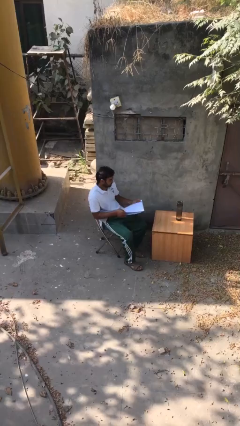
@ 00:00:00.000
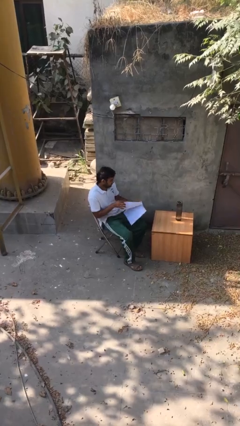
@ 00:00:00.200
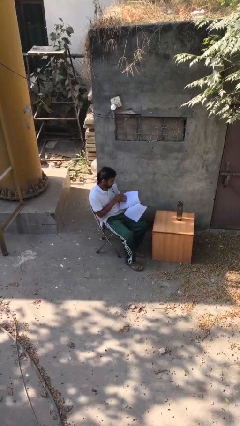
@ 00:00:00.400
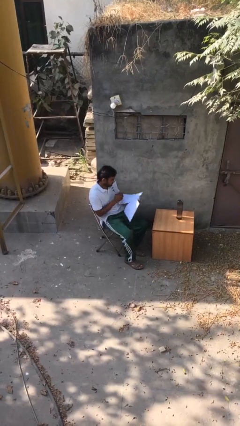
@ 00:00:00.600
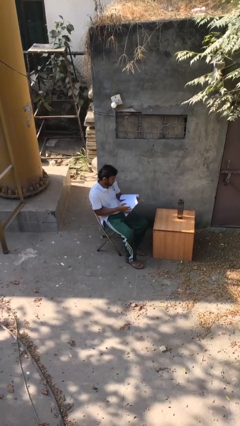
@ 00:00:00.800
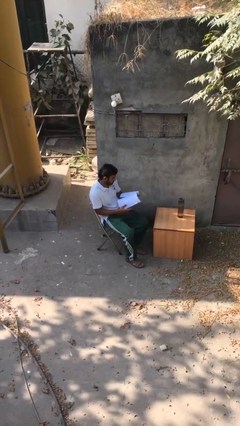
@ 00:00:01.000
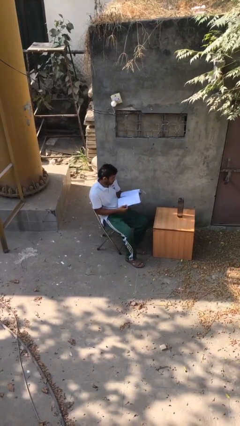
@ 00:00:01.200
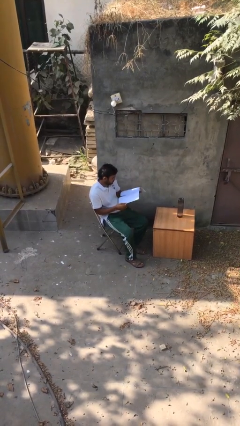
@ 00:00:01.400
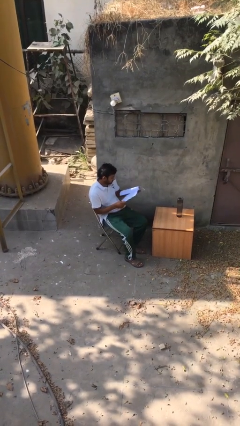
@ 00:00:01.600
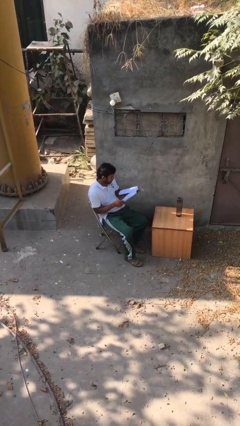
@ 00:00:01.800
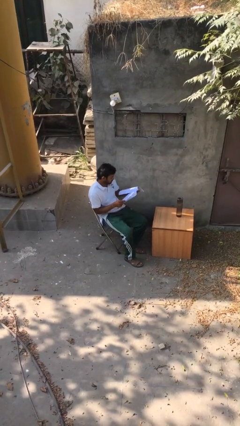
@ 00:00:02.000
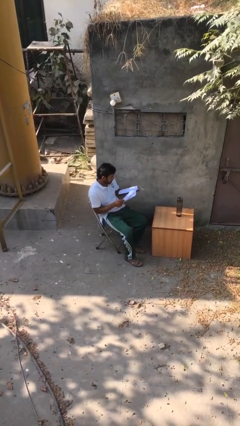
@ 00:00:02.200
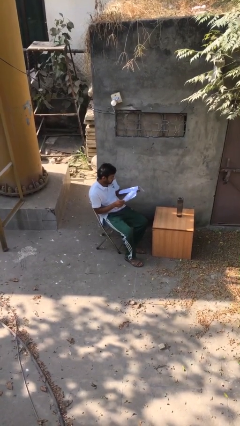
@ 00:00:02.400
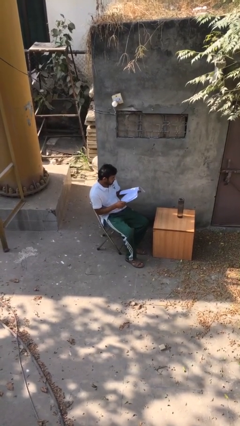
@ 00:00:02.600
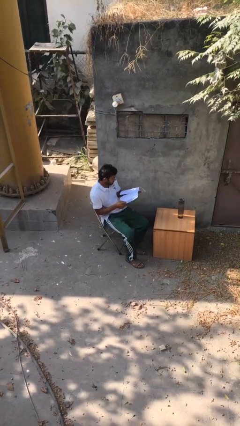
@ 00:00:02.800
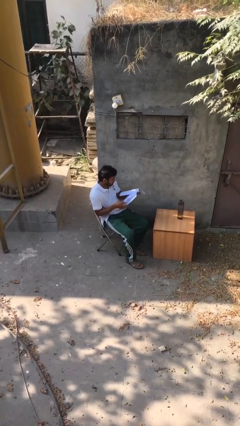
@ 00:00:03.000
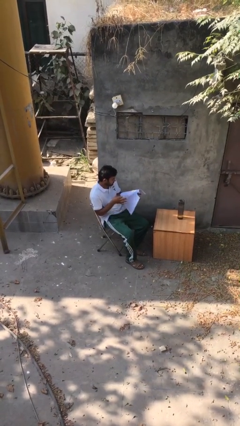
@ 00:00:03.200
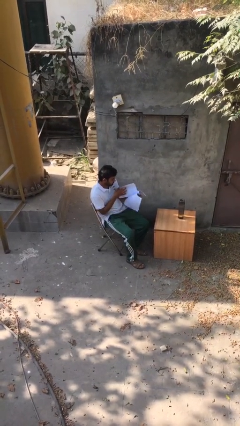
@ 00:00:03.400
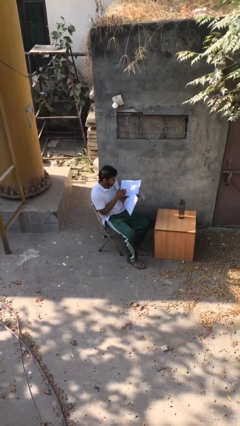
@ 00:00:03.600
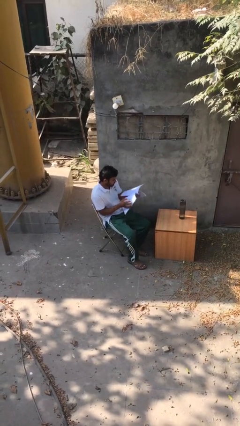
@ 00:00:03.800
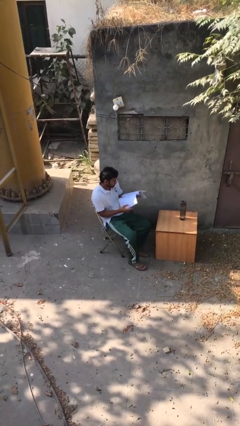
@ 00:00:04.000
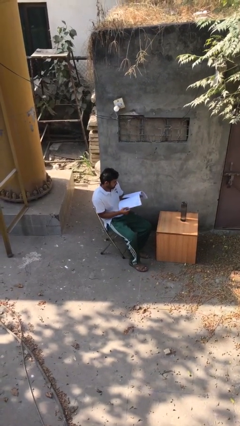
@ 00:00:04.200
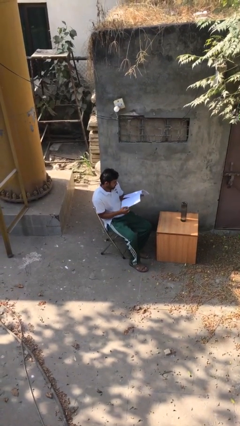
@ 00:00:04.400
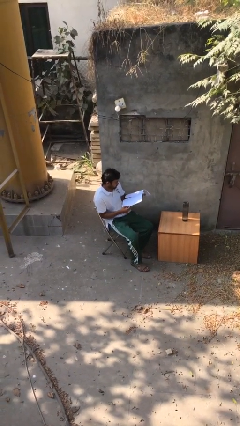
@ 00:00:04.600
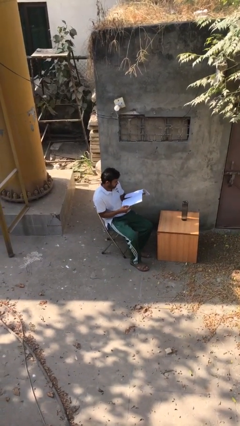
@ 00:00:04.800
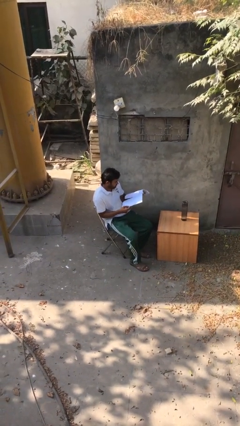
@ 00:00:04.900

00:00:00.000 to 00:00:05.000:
person reads document

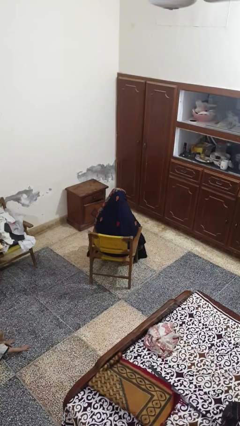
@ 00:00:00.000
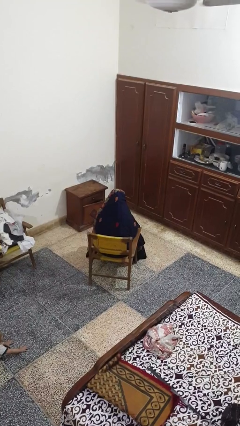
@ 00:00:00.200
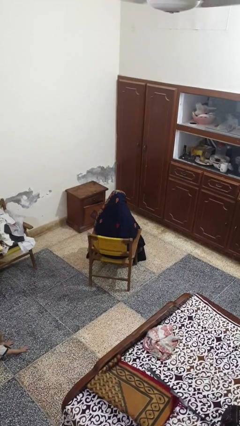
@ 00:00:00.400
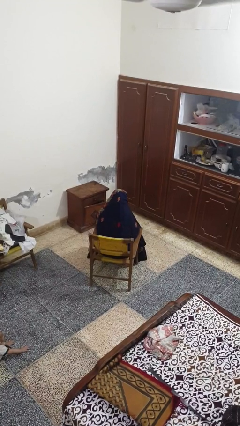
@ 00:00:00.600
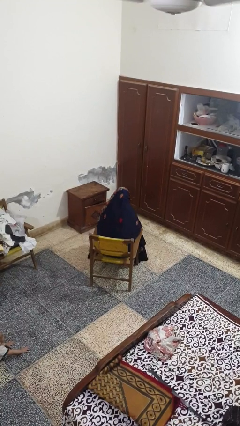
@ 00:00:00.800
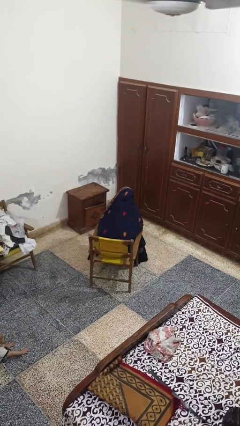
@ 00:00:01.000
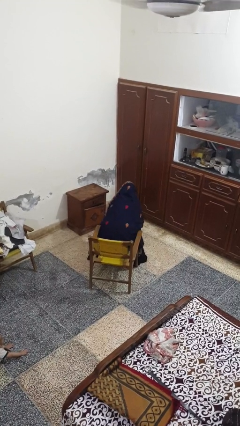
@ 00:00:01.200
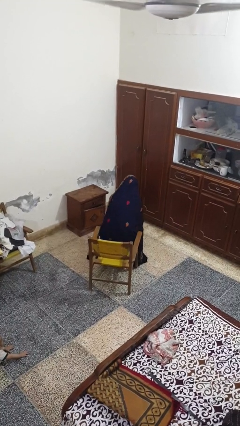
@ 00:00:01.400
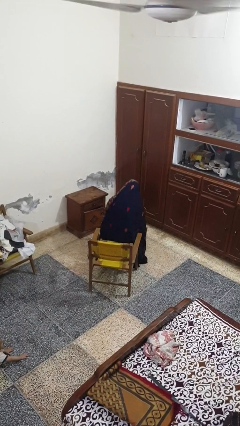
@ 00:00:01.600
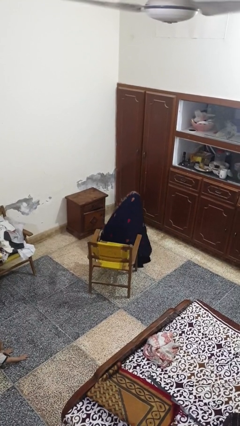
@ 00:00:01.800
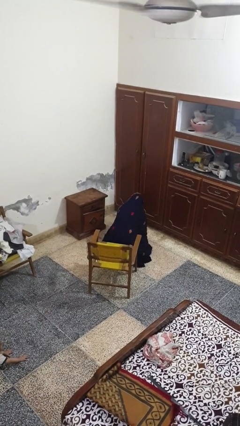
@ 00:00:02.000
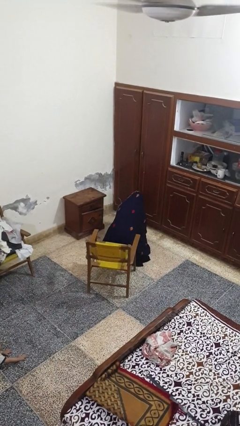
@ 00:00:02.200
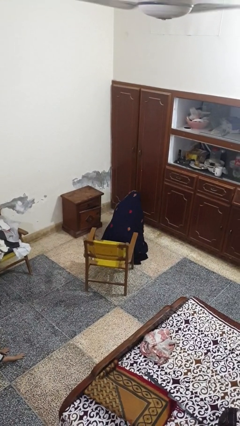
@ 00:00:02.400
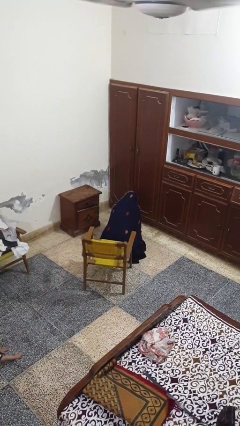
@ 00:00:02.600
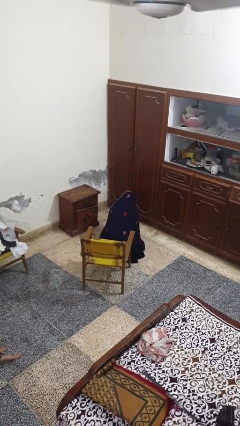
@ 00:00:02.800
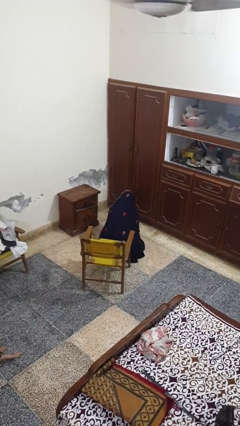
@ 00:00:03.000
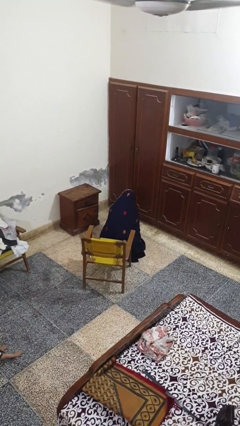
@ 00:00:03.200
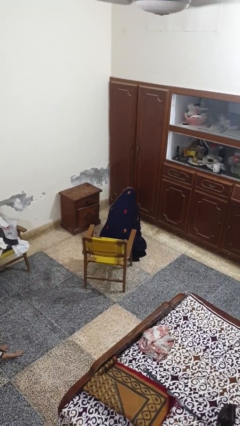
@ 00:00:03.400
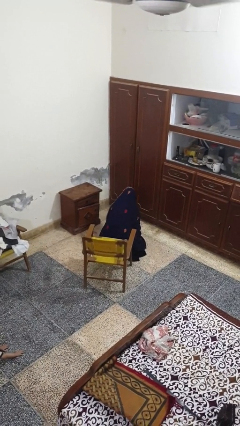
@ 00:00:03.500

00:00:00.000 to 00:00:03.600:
person falls from chair

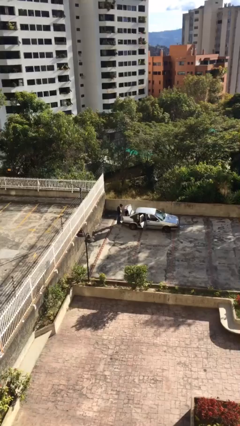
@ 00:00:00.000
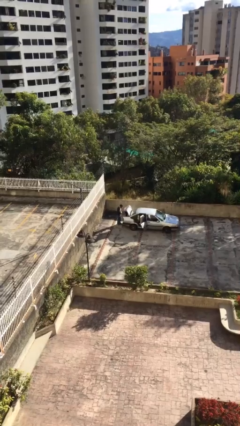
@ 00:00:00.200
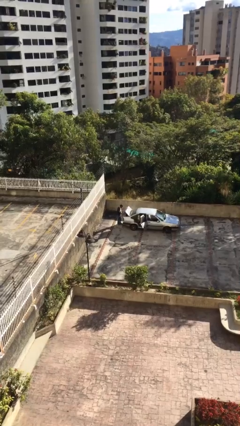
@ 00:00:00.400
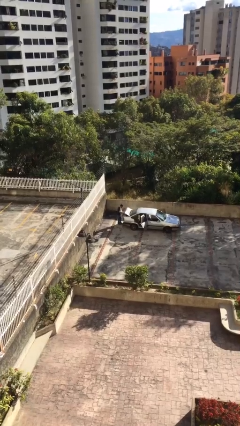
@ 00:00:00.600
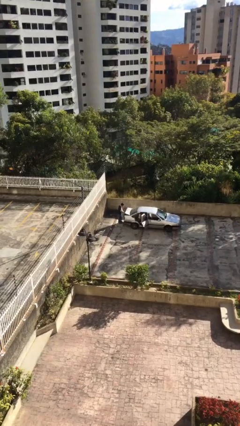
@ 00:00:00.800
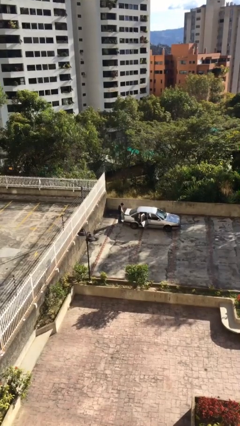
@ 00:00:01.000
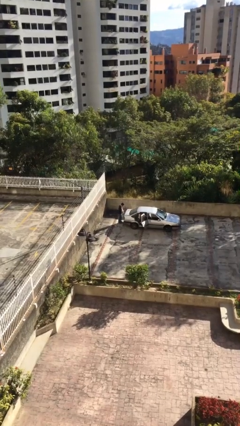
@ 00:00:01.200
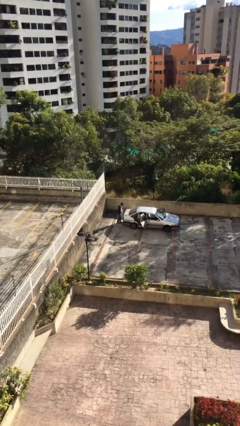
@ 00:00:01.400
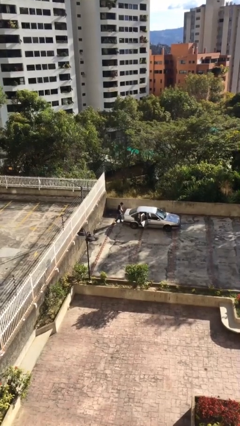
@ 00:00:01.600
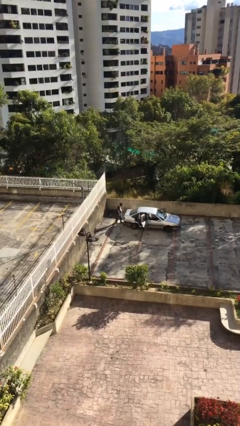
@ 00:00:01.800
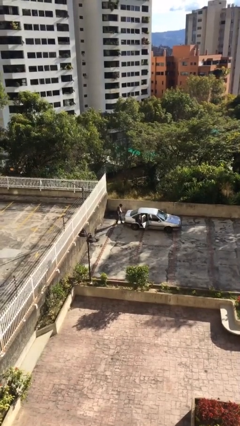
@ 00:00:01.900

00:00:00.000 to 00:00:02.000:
person closes car trunk

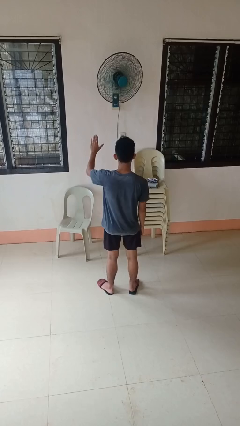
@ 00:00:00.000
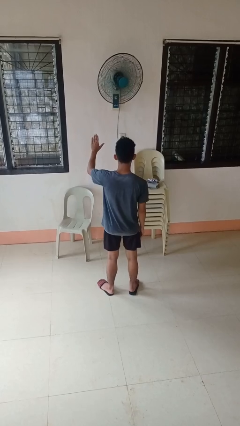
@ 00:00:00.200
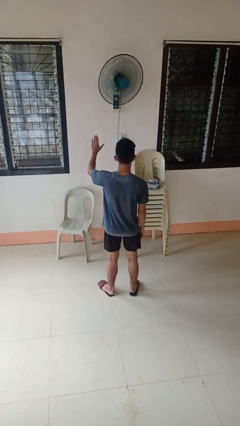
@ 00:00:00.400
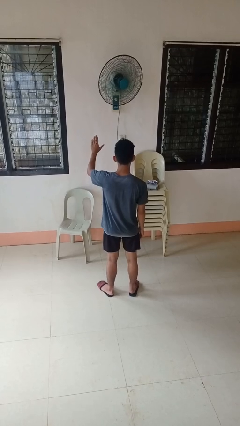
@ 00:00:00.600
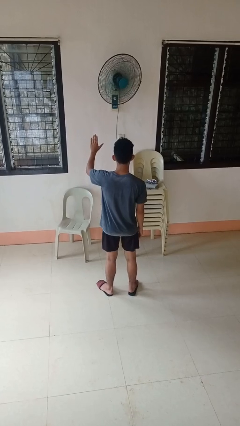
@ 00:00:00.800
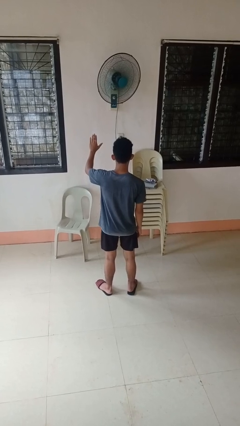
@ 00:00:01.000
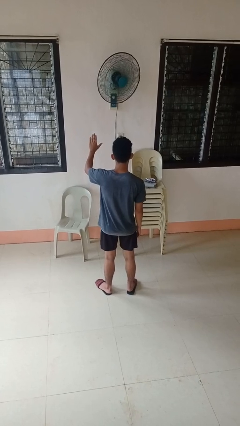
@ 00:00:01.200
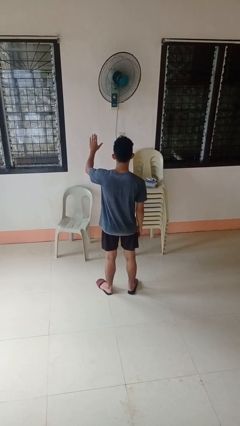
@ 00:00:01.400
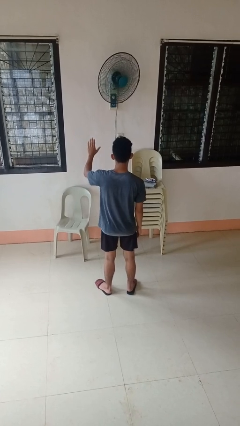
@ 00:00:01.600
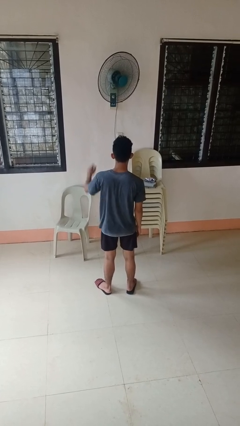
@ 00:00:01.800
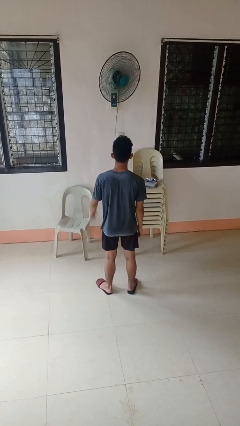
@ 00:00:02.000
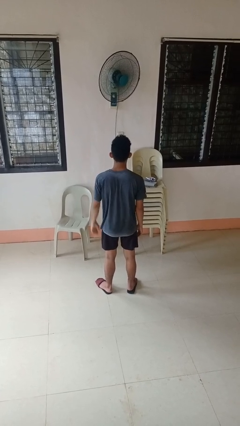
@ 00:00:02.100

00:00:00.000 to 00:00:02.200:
person gestures stop

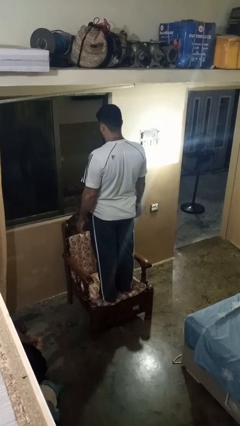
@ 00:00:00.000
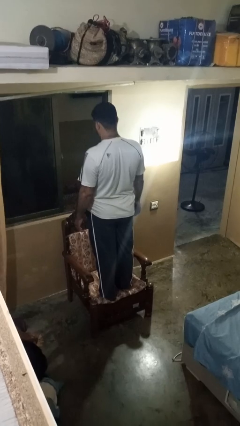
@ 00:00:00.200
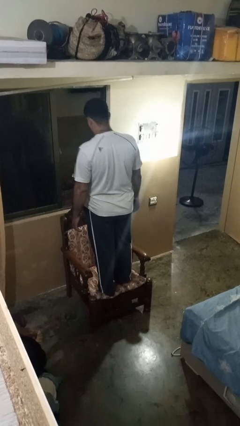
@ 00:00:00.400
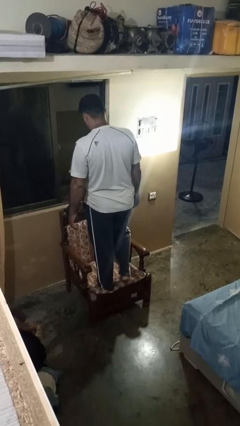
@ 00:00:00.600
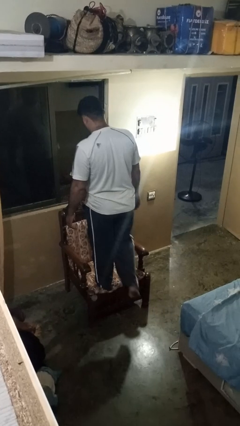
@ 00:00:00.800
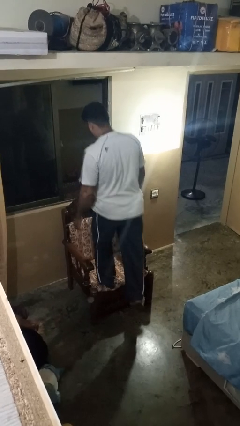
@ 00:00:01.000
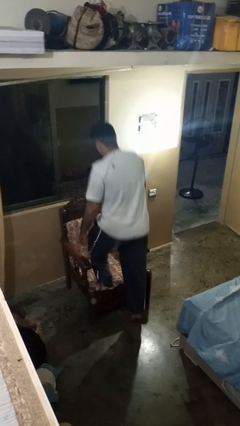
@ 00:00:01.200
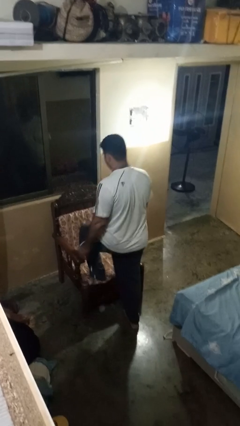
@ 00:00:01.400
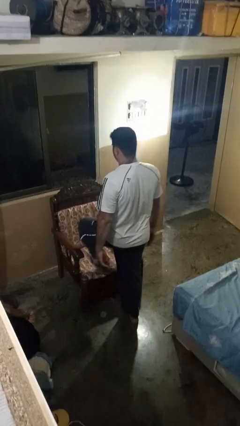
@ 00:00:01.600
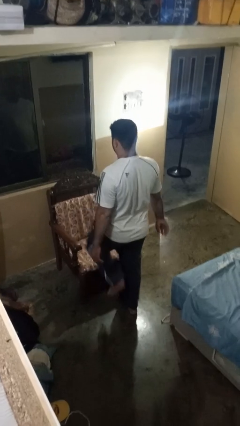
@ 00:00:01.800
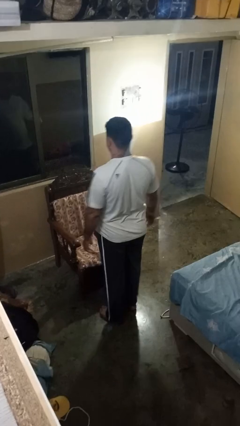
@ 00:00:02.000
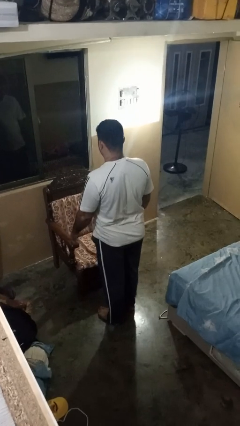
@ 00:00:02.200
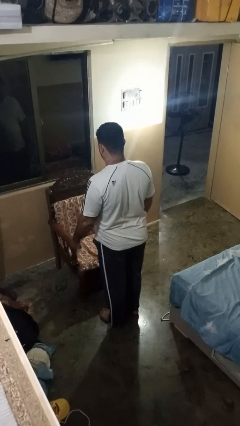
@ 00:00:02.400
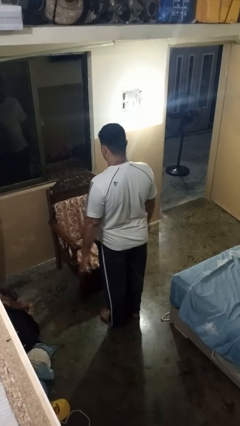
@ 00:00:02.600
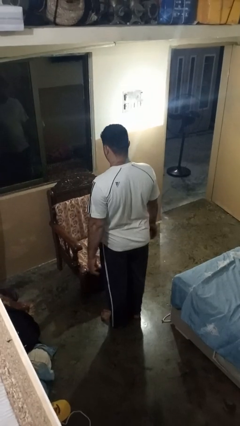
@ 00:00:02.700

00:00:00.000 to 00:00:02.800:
person climbs off chair

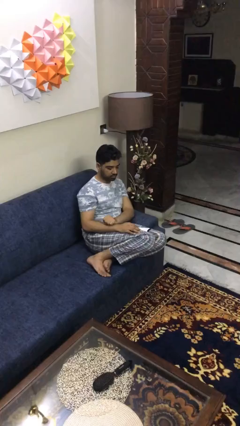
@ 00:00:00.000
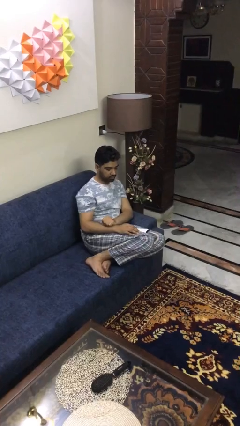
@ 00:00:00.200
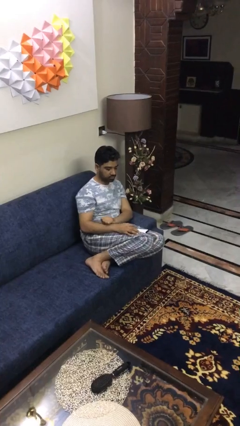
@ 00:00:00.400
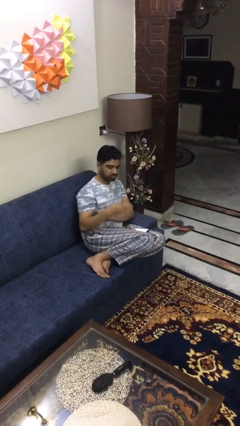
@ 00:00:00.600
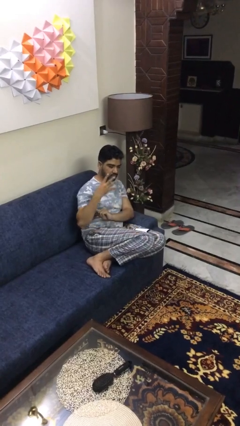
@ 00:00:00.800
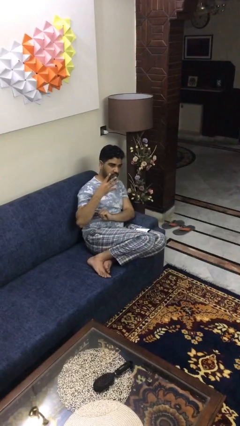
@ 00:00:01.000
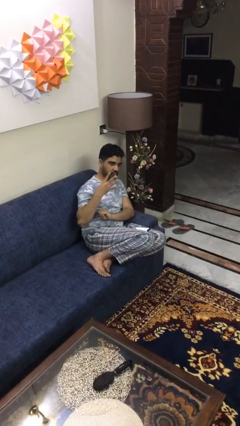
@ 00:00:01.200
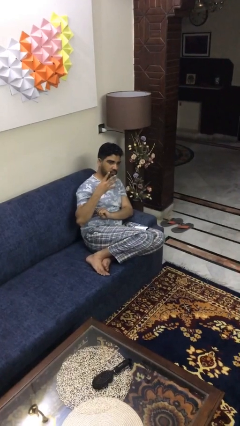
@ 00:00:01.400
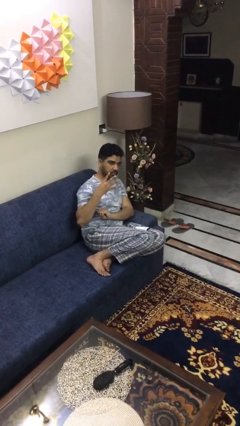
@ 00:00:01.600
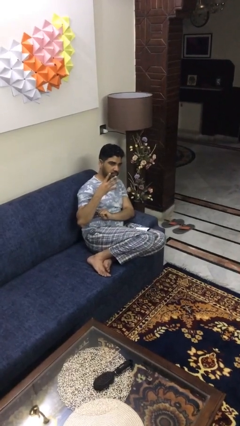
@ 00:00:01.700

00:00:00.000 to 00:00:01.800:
person gestures number four
